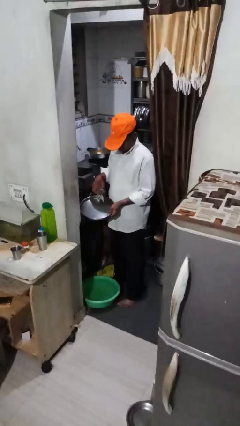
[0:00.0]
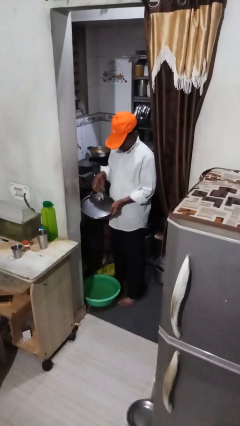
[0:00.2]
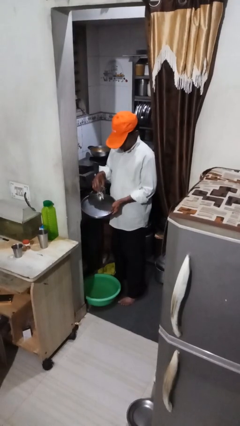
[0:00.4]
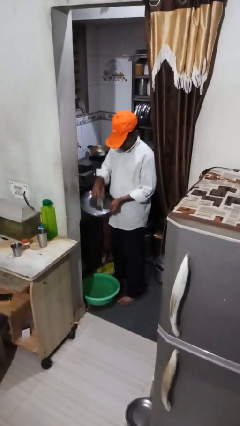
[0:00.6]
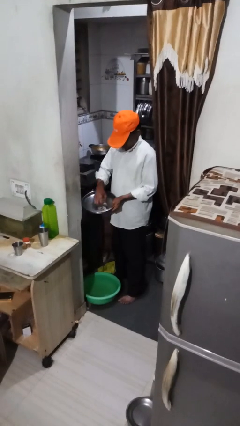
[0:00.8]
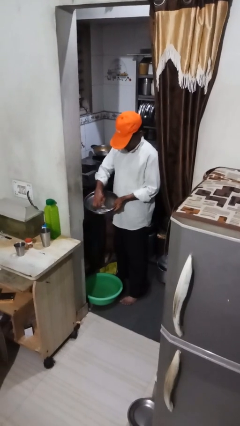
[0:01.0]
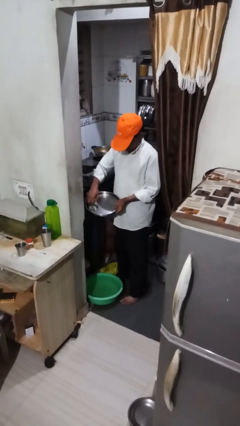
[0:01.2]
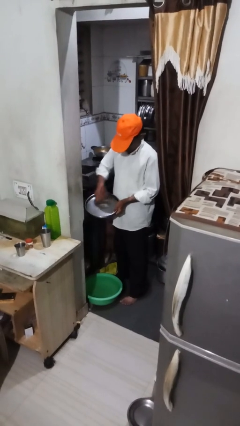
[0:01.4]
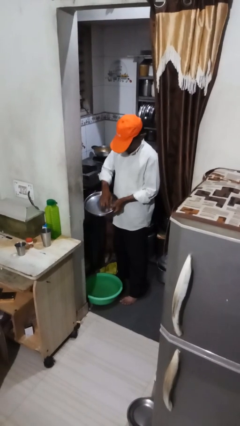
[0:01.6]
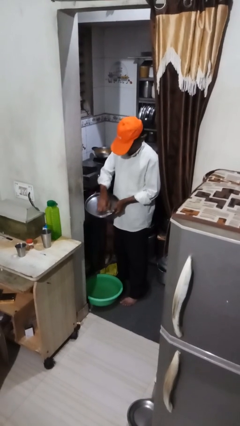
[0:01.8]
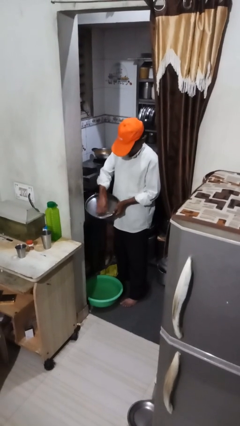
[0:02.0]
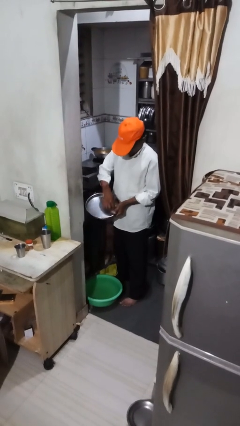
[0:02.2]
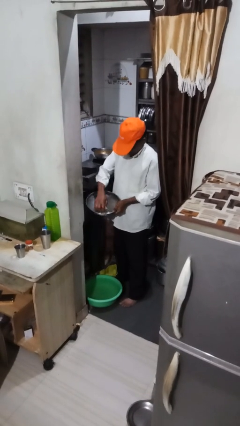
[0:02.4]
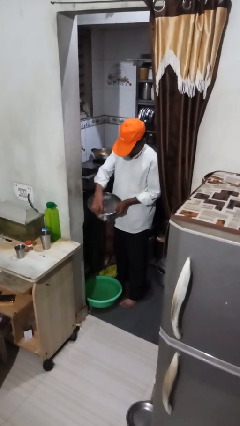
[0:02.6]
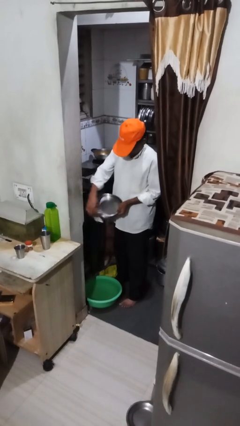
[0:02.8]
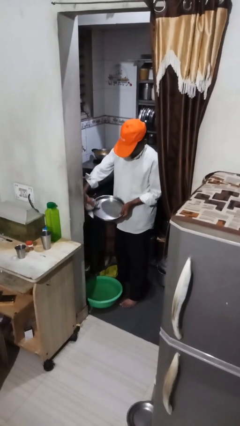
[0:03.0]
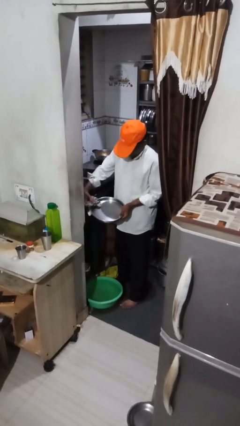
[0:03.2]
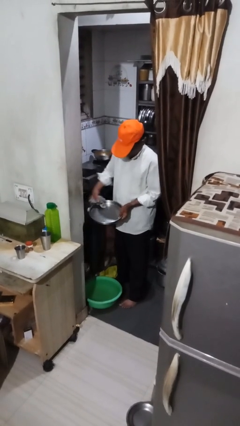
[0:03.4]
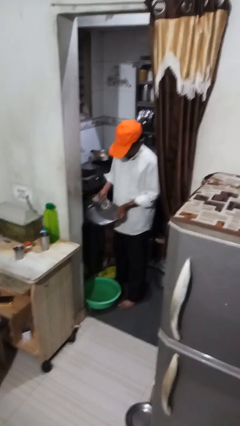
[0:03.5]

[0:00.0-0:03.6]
person dries dish

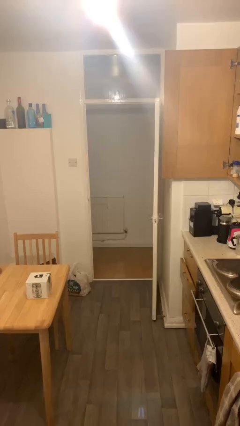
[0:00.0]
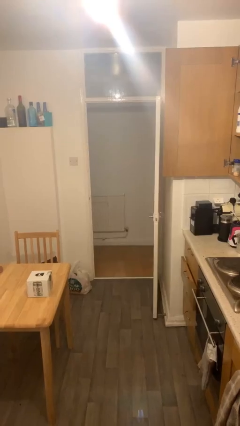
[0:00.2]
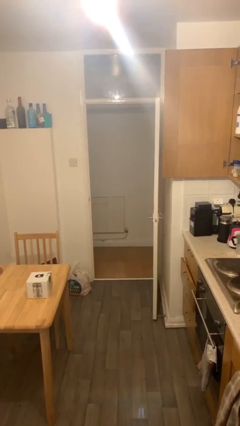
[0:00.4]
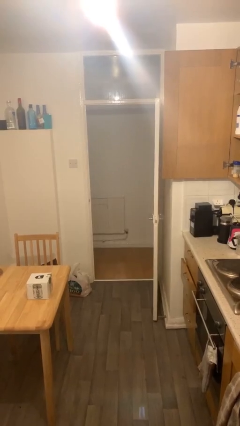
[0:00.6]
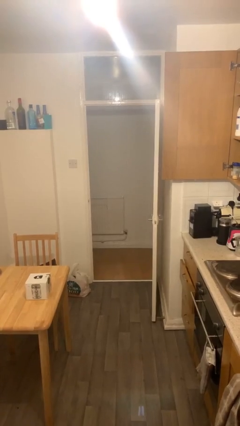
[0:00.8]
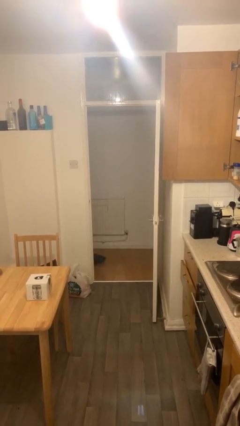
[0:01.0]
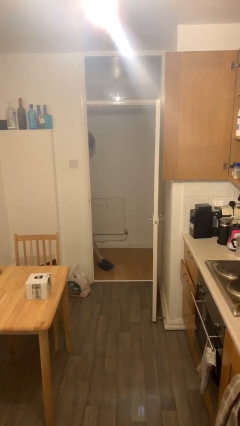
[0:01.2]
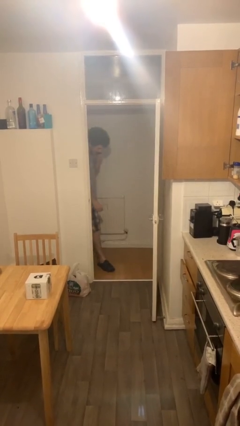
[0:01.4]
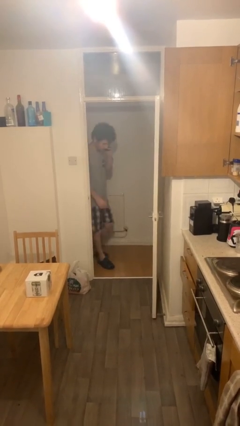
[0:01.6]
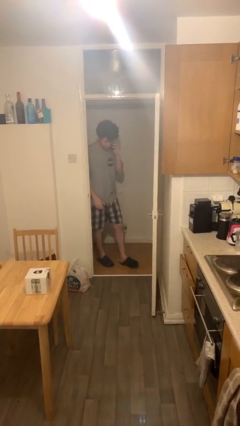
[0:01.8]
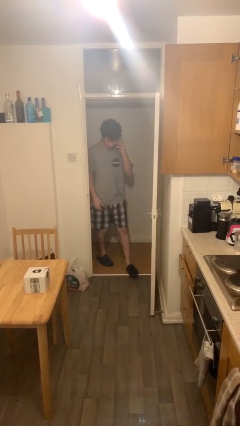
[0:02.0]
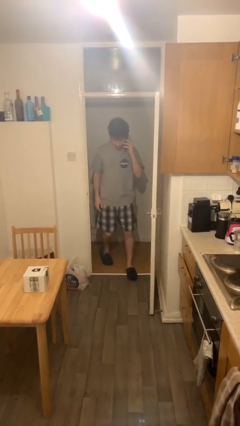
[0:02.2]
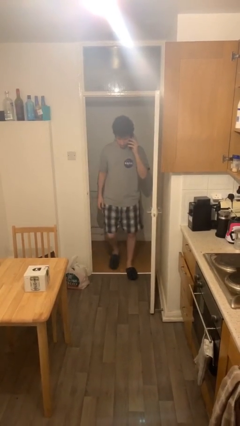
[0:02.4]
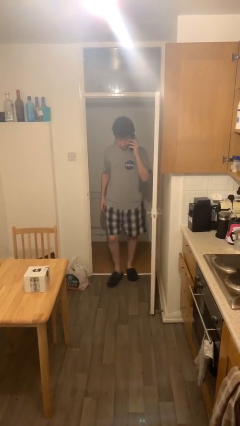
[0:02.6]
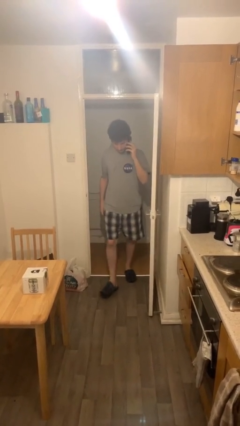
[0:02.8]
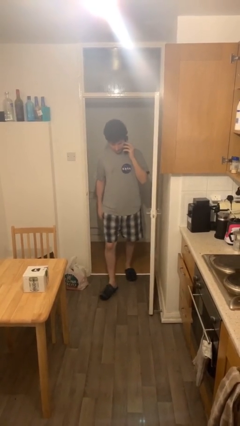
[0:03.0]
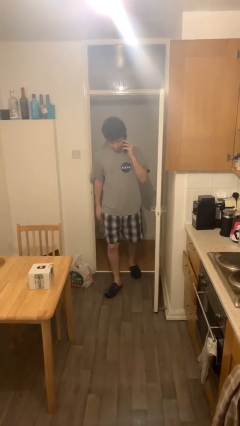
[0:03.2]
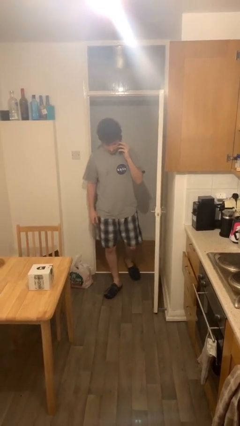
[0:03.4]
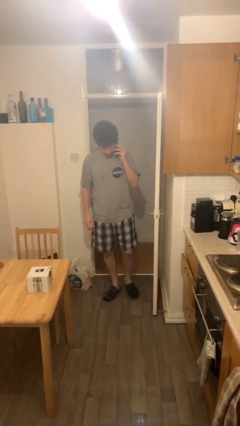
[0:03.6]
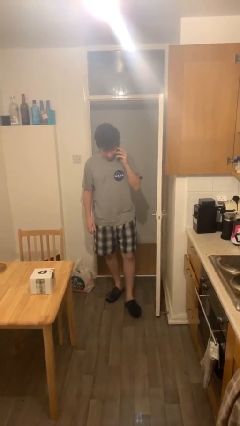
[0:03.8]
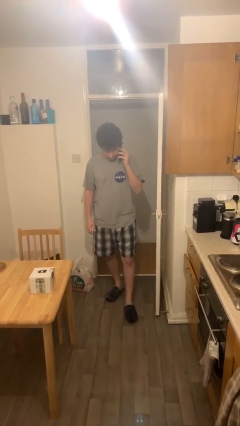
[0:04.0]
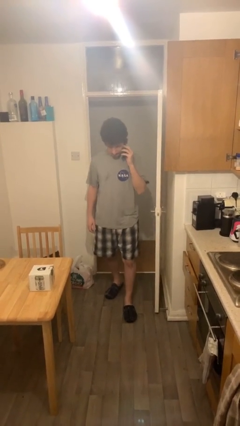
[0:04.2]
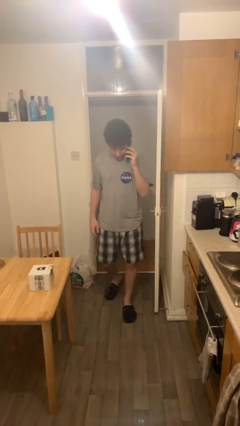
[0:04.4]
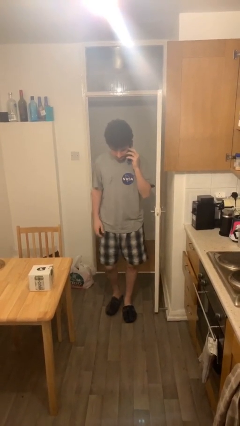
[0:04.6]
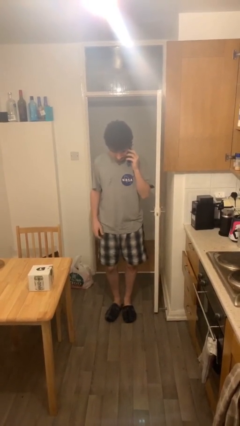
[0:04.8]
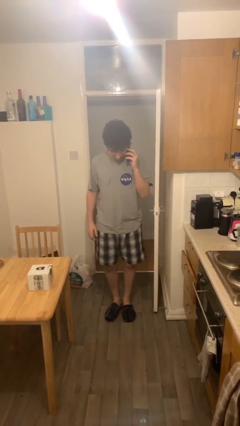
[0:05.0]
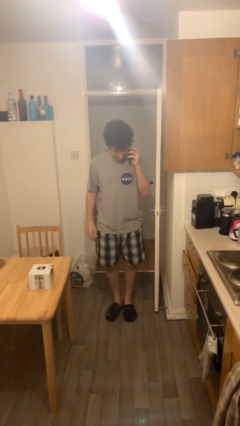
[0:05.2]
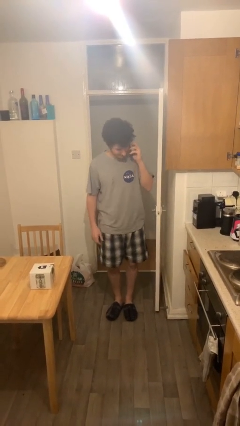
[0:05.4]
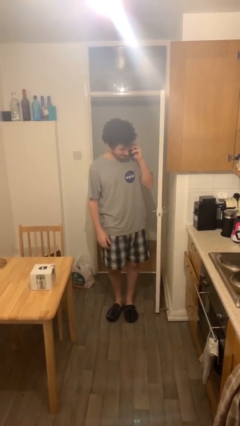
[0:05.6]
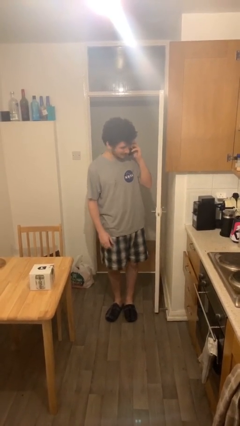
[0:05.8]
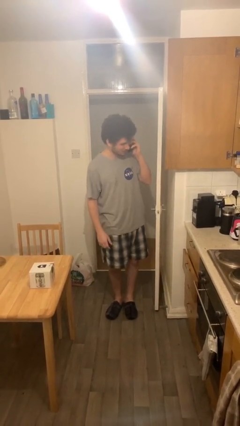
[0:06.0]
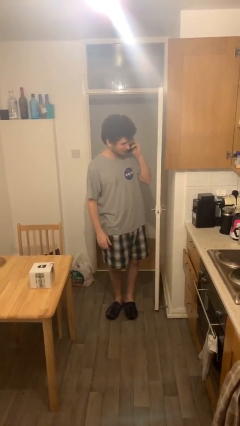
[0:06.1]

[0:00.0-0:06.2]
person enters scene through structure

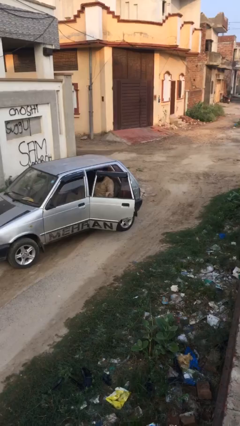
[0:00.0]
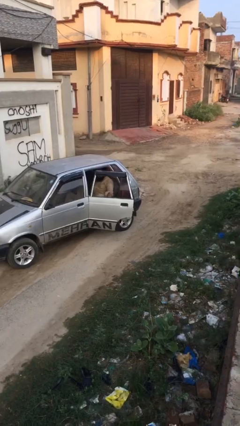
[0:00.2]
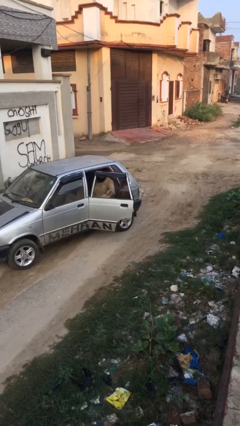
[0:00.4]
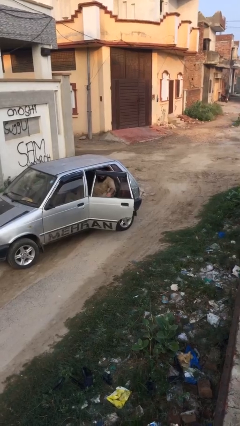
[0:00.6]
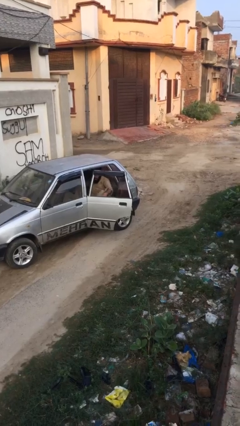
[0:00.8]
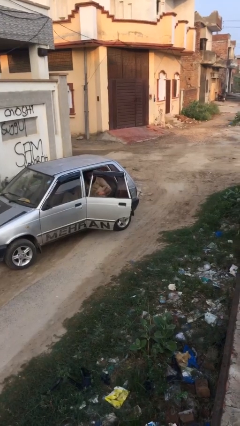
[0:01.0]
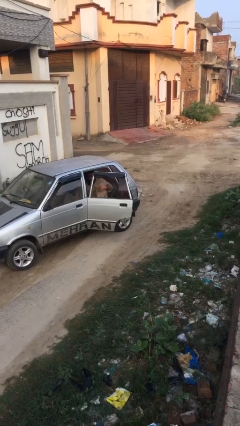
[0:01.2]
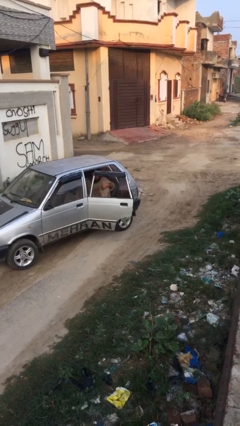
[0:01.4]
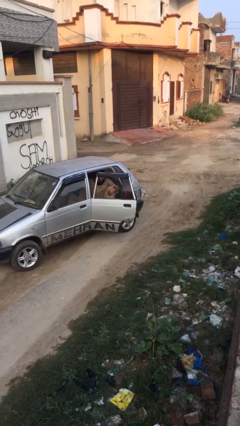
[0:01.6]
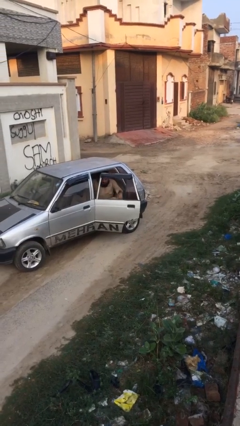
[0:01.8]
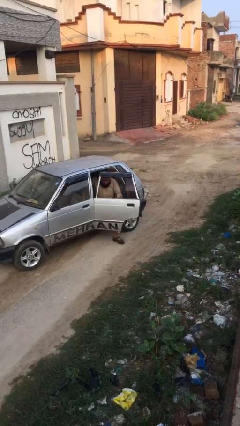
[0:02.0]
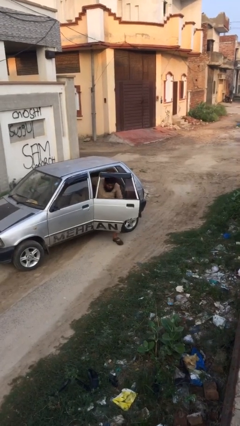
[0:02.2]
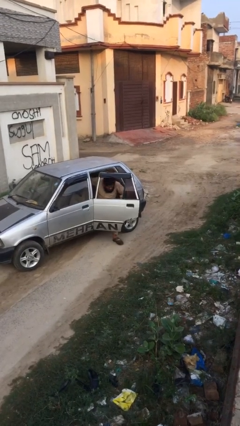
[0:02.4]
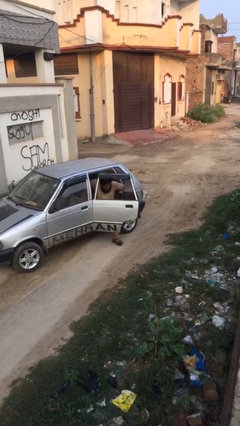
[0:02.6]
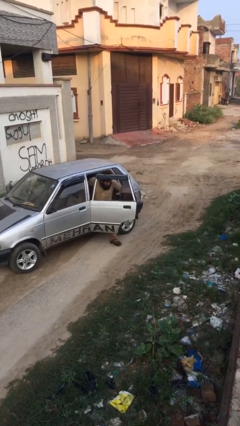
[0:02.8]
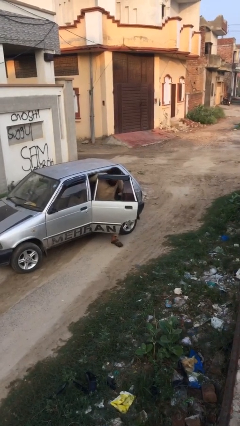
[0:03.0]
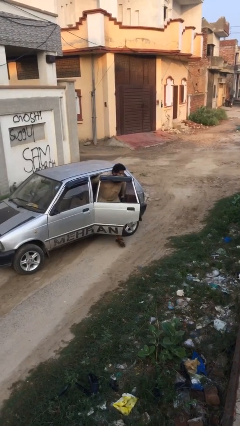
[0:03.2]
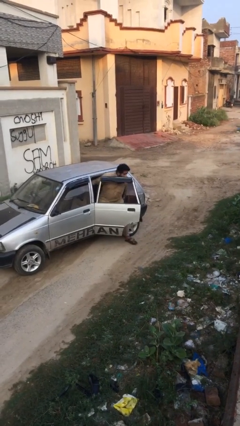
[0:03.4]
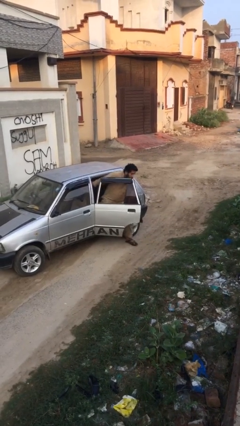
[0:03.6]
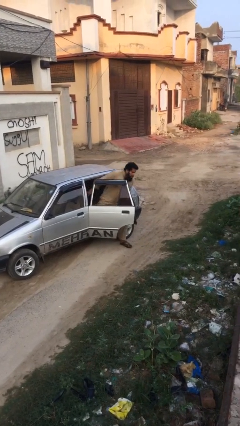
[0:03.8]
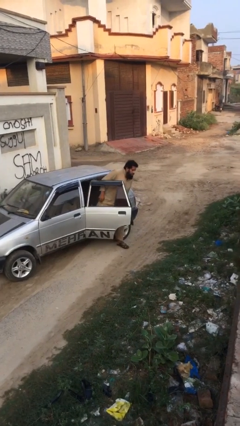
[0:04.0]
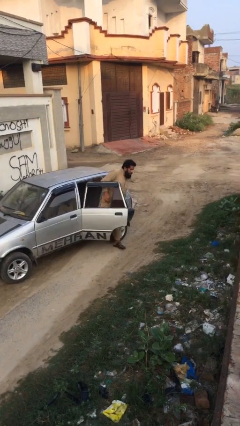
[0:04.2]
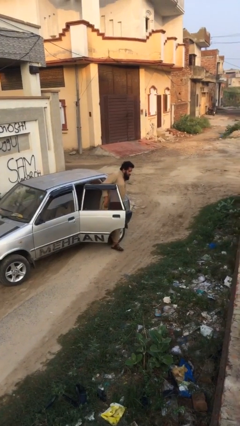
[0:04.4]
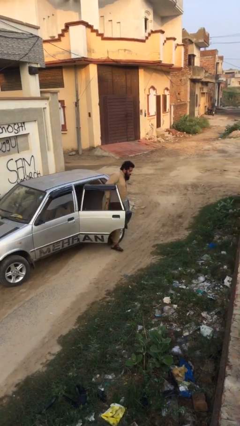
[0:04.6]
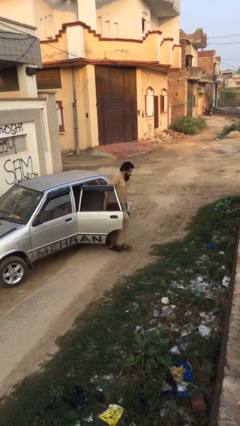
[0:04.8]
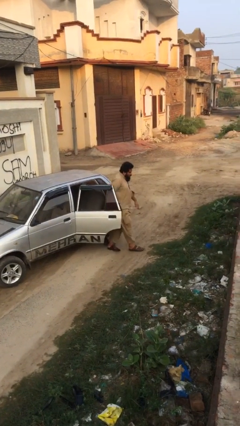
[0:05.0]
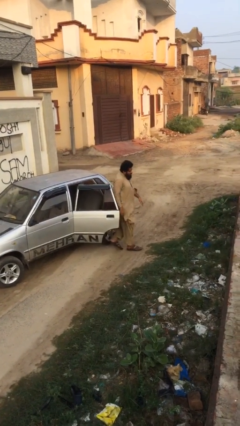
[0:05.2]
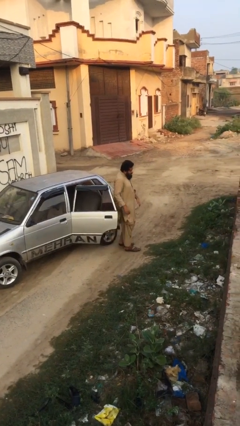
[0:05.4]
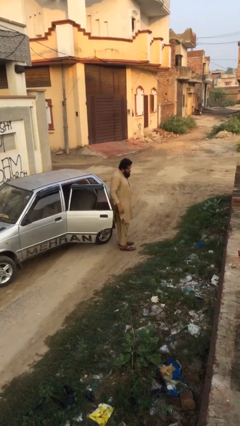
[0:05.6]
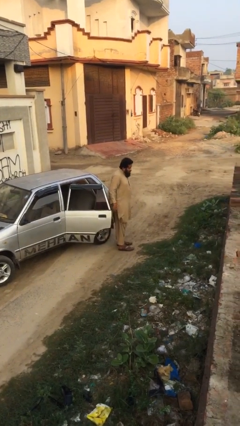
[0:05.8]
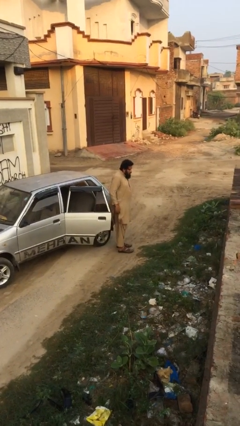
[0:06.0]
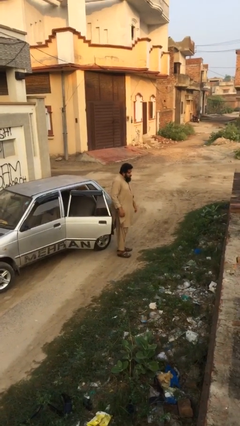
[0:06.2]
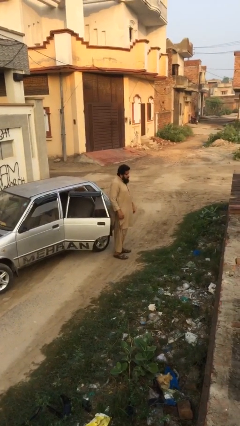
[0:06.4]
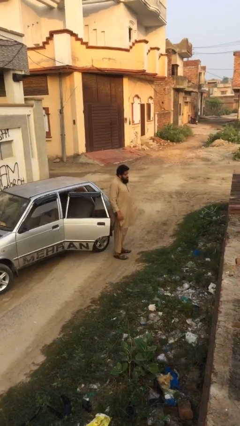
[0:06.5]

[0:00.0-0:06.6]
person exits car

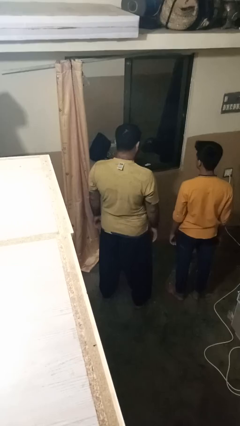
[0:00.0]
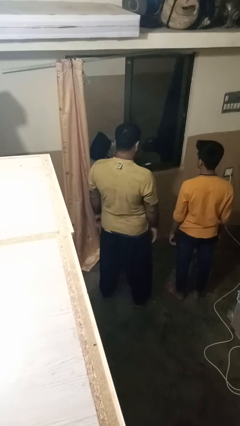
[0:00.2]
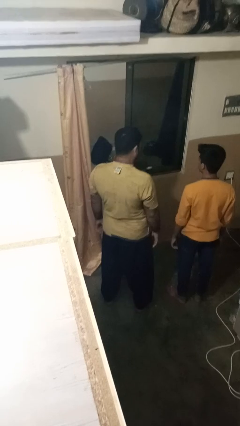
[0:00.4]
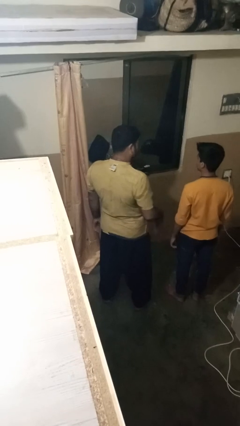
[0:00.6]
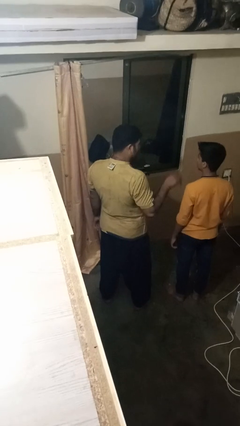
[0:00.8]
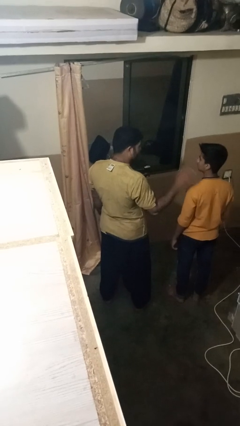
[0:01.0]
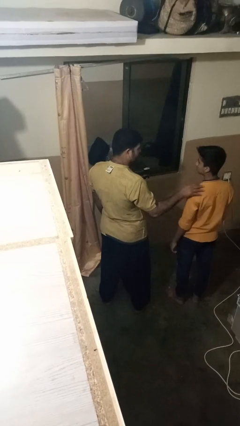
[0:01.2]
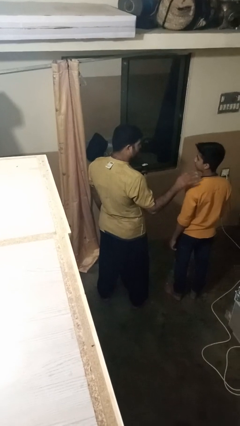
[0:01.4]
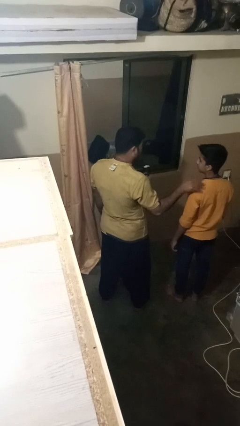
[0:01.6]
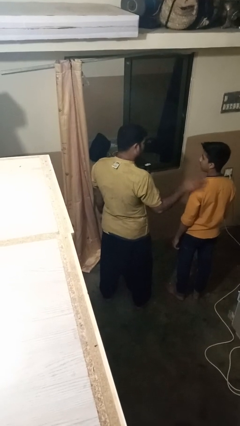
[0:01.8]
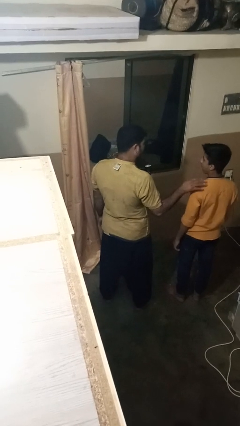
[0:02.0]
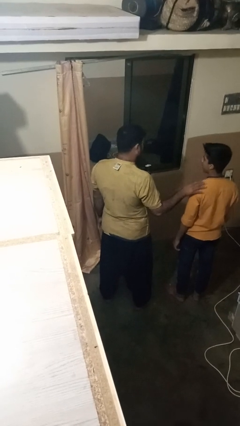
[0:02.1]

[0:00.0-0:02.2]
person pounds shoulders of person
